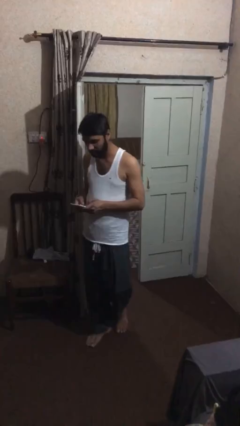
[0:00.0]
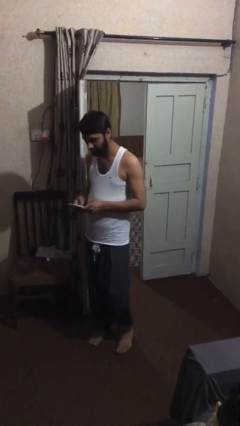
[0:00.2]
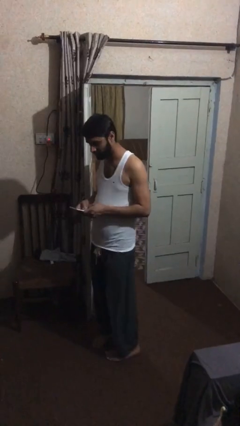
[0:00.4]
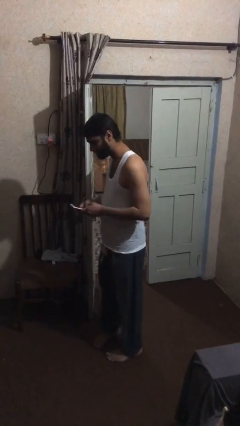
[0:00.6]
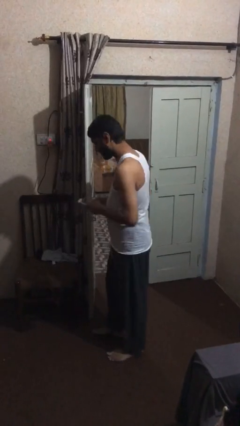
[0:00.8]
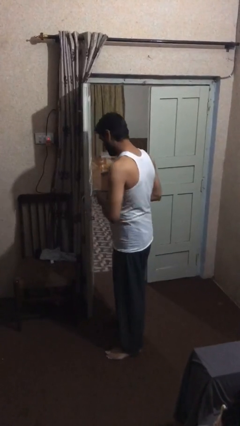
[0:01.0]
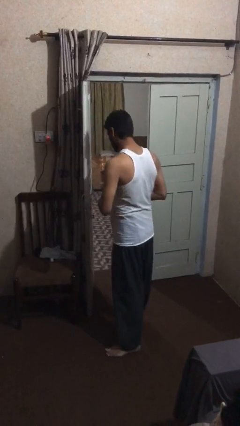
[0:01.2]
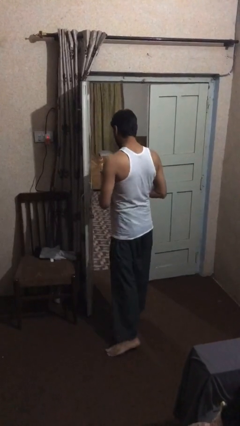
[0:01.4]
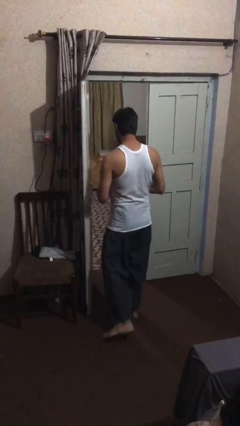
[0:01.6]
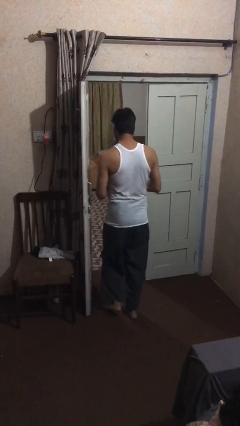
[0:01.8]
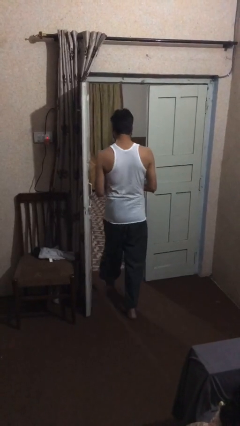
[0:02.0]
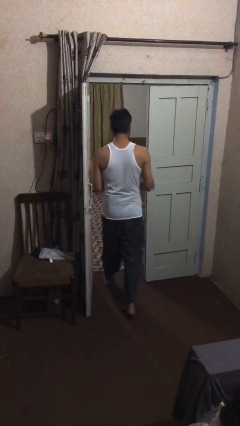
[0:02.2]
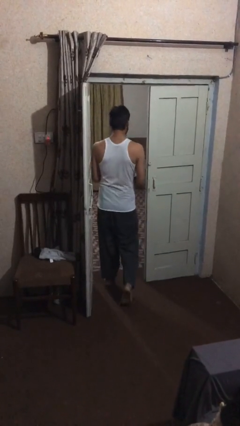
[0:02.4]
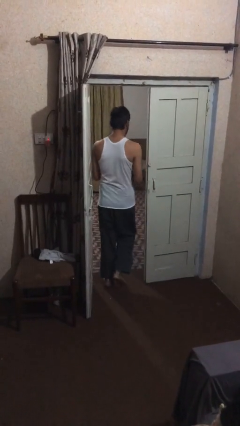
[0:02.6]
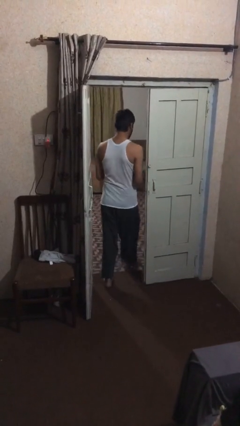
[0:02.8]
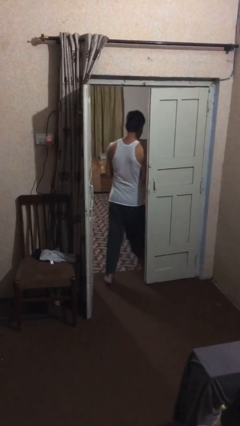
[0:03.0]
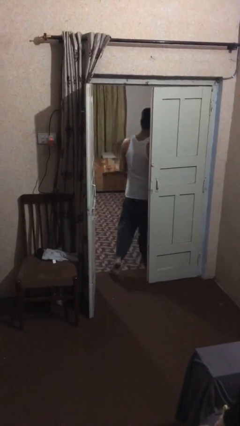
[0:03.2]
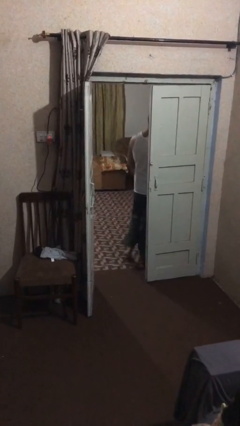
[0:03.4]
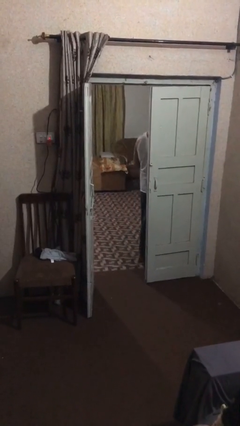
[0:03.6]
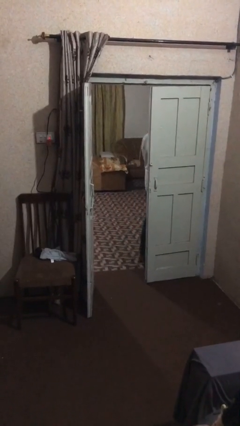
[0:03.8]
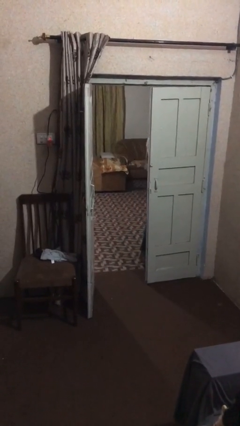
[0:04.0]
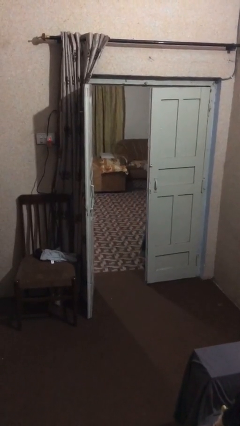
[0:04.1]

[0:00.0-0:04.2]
person exits scene through structure

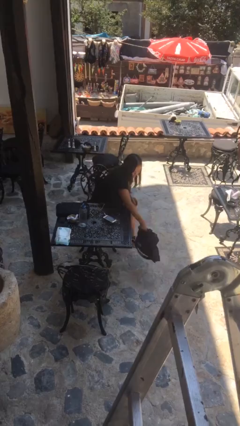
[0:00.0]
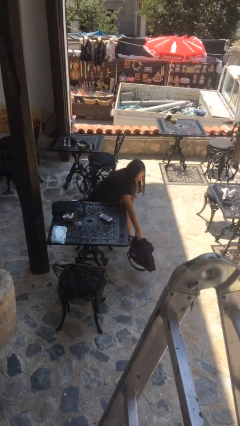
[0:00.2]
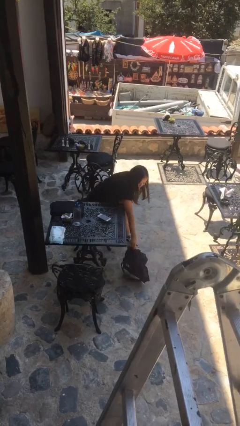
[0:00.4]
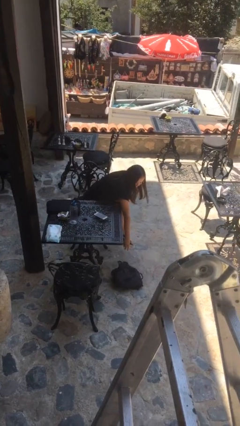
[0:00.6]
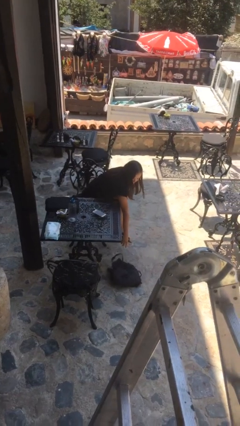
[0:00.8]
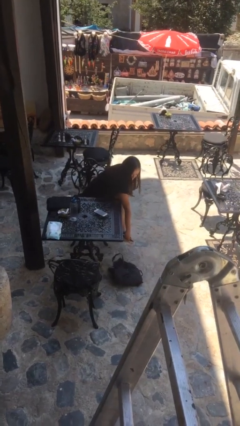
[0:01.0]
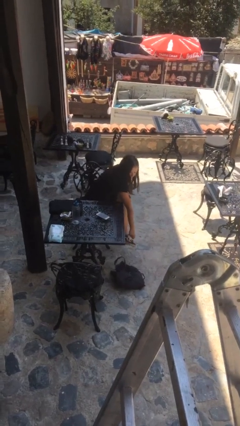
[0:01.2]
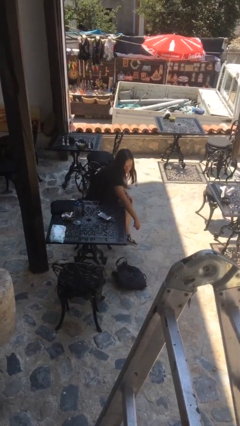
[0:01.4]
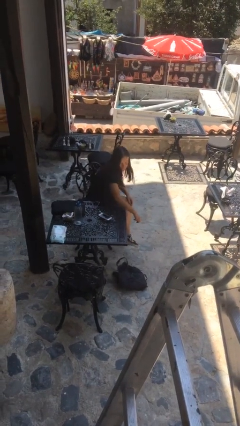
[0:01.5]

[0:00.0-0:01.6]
person puts down object on floor

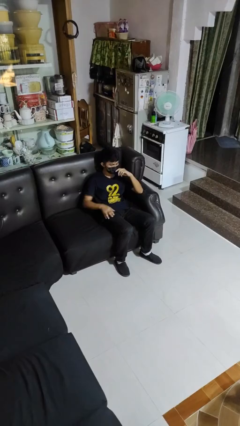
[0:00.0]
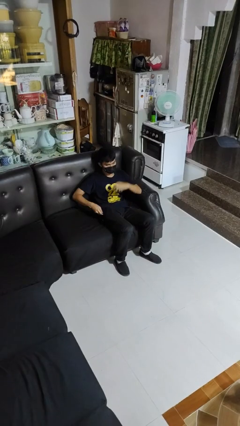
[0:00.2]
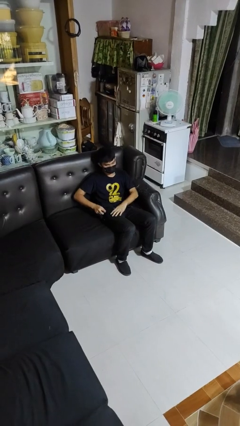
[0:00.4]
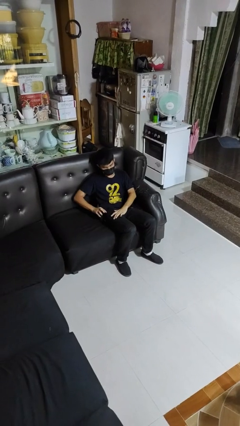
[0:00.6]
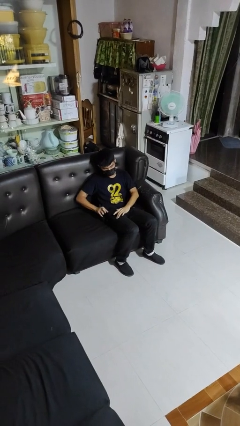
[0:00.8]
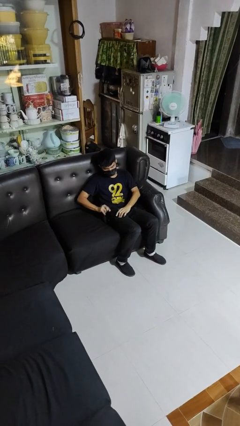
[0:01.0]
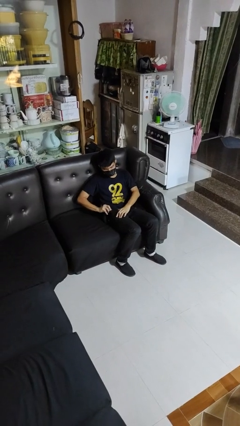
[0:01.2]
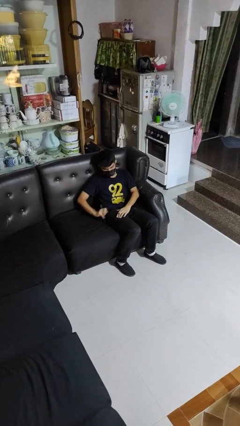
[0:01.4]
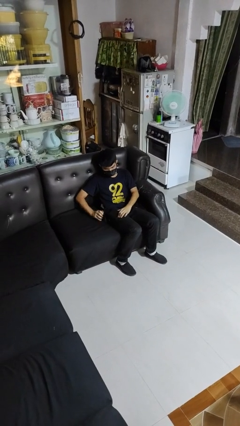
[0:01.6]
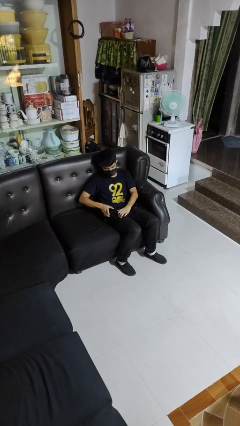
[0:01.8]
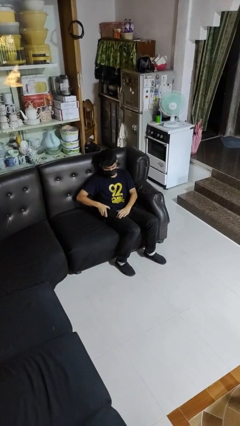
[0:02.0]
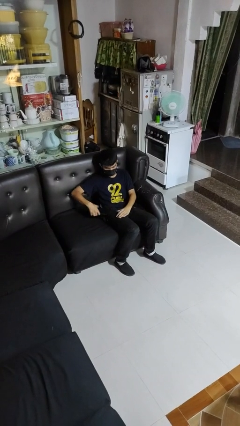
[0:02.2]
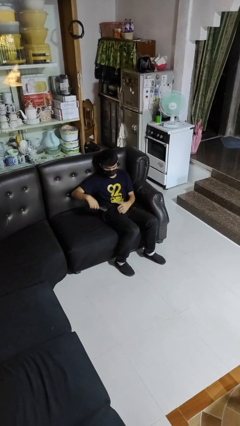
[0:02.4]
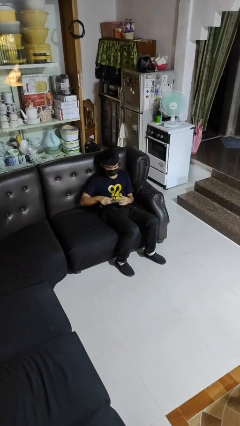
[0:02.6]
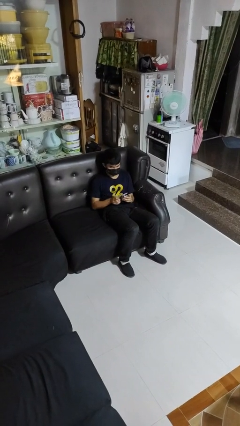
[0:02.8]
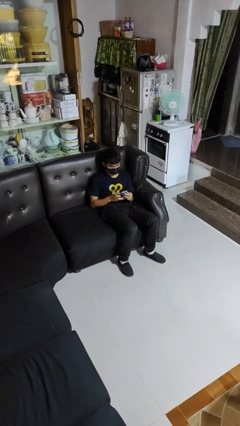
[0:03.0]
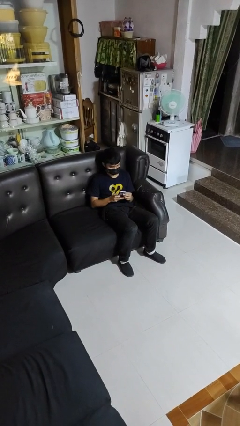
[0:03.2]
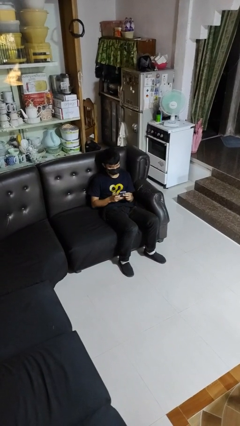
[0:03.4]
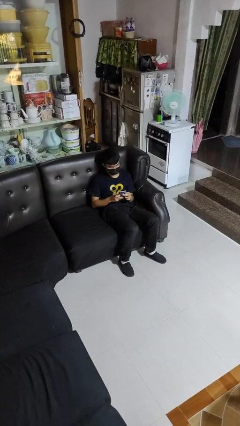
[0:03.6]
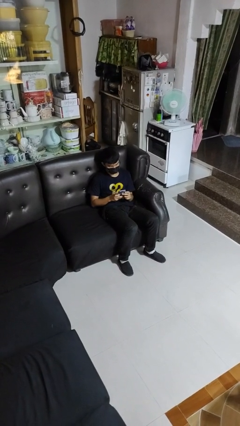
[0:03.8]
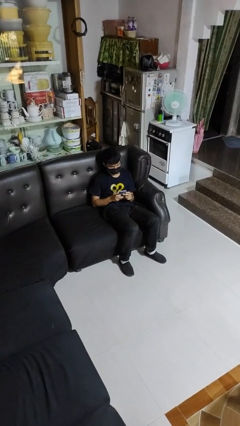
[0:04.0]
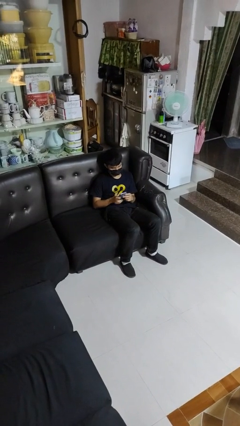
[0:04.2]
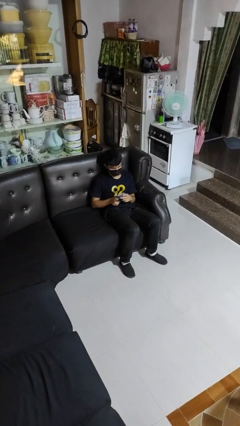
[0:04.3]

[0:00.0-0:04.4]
person takes phone from pocket

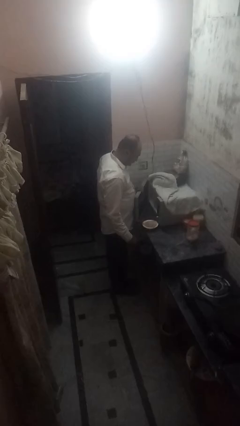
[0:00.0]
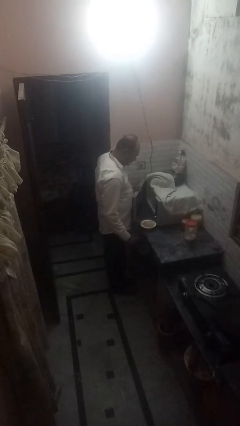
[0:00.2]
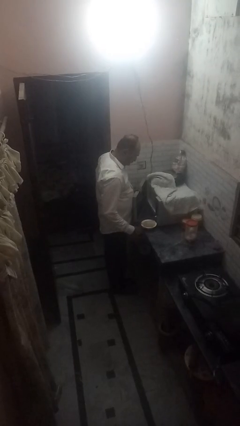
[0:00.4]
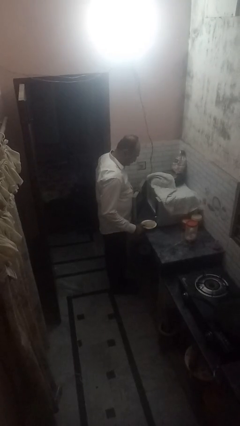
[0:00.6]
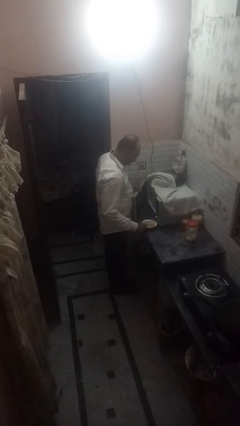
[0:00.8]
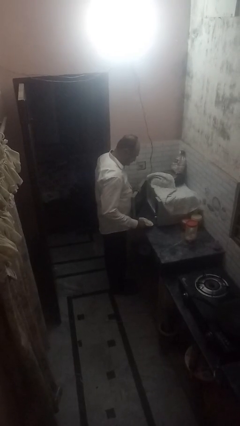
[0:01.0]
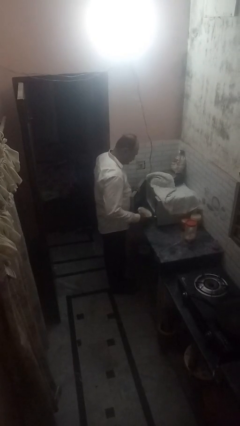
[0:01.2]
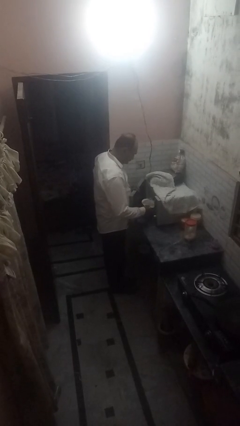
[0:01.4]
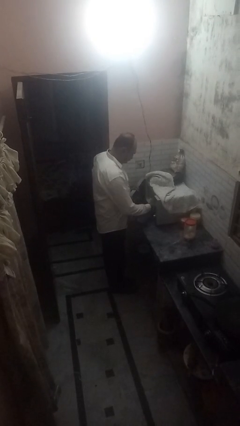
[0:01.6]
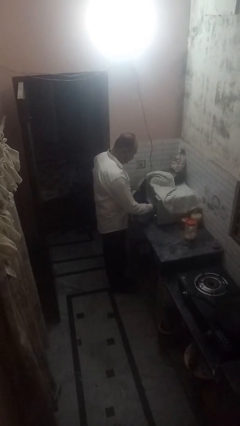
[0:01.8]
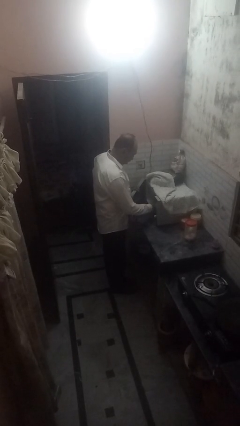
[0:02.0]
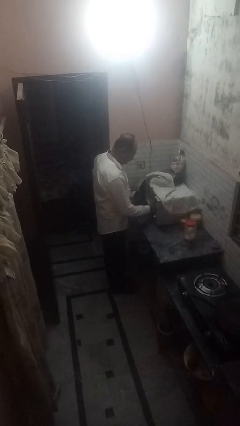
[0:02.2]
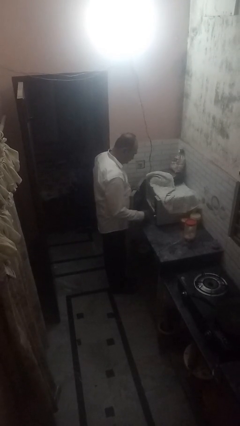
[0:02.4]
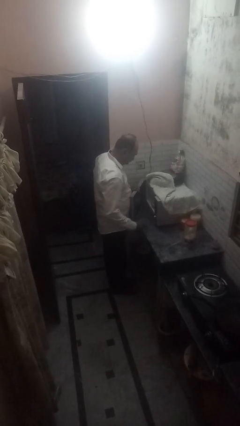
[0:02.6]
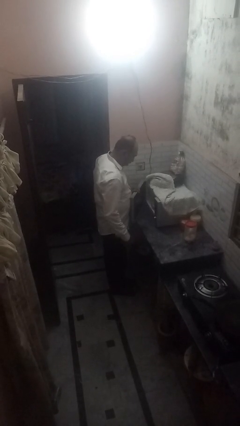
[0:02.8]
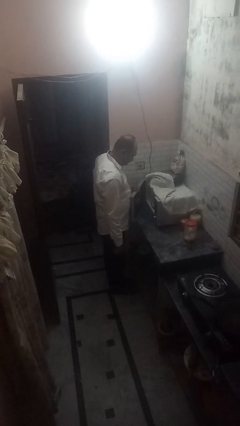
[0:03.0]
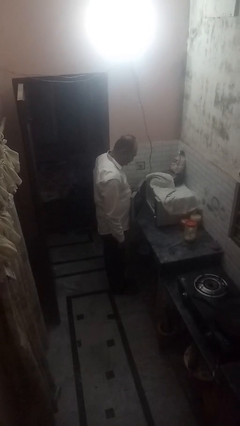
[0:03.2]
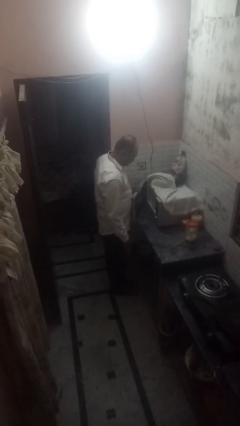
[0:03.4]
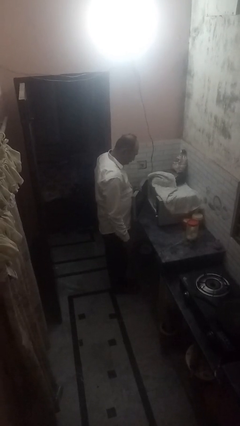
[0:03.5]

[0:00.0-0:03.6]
person puts object into microwave

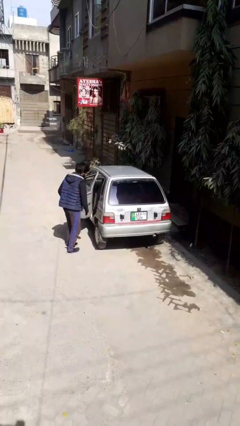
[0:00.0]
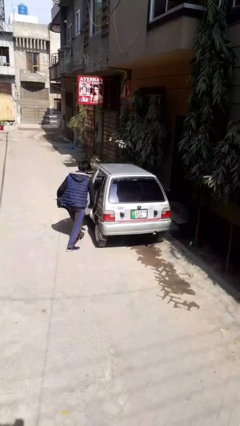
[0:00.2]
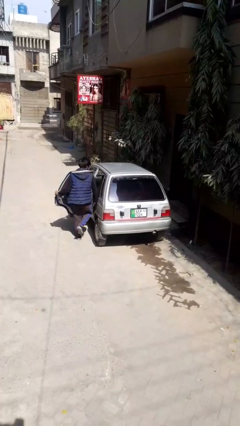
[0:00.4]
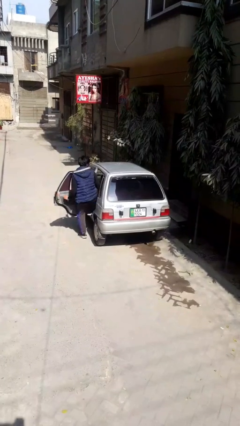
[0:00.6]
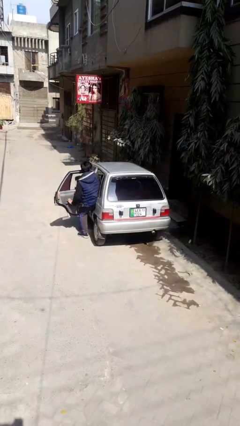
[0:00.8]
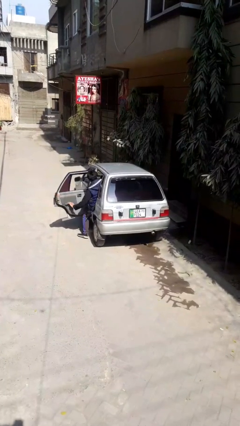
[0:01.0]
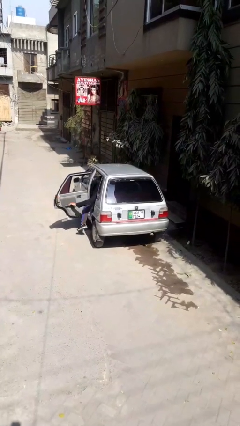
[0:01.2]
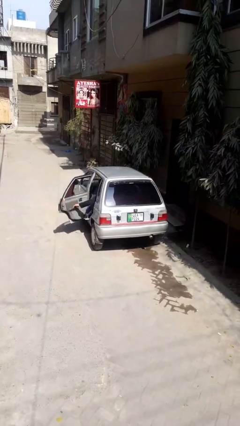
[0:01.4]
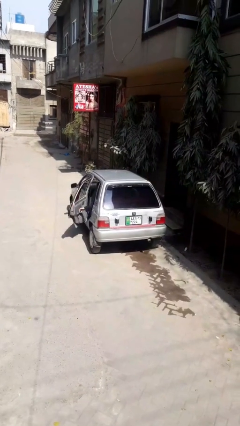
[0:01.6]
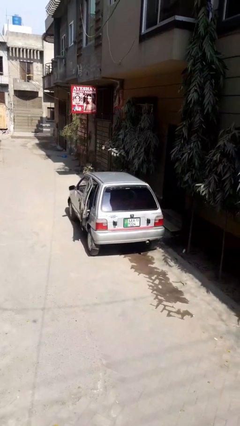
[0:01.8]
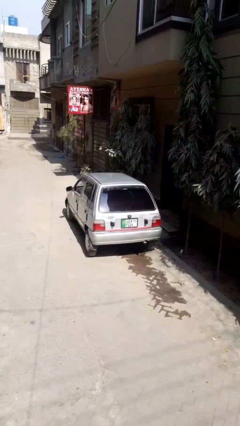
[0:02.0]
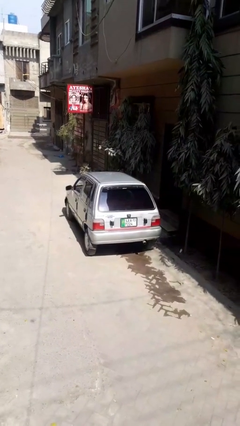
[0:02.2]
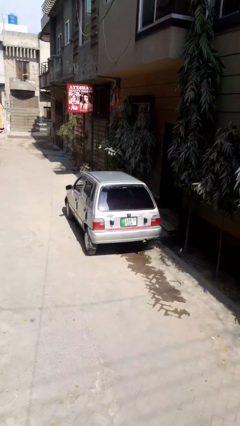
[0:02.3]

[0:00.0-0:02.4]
car picks up person

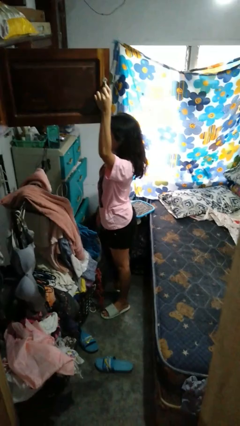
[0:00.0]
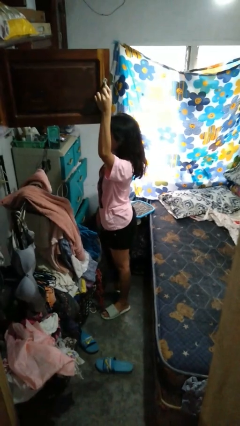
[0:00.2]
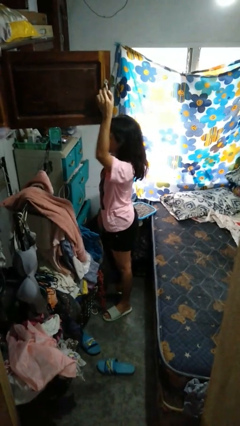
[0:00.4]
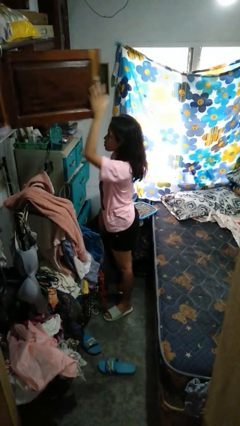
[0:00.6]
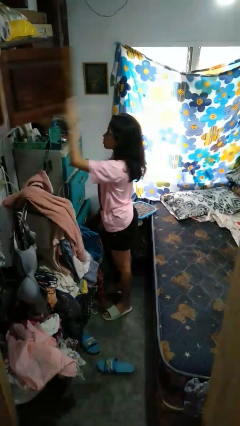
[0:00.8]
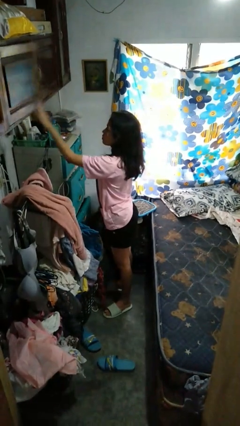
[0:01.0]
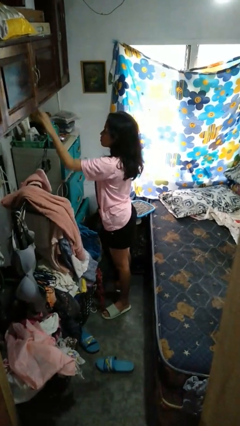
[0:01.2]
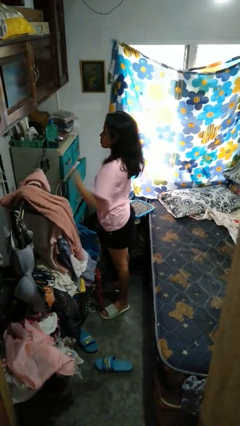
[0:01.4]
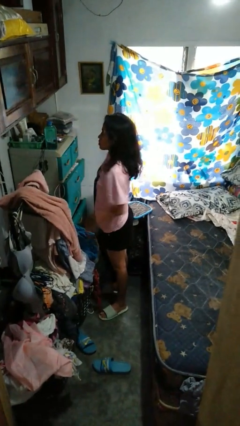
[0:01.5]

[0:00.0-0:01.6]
person closes closet door
